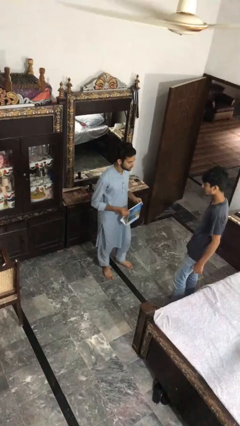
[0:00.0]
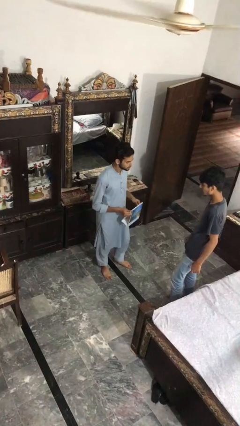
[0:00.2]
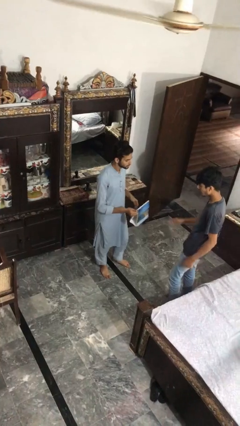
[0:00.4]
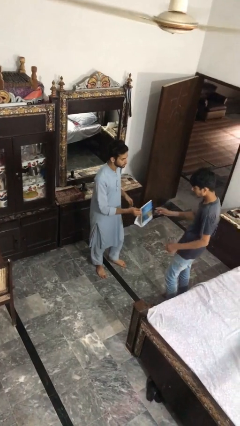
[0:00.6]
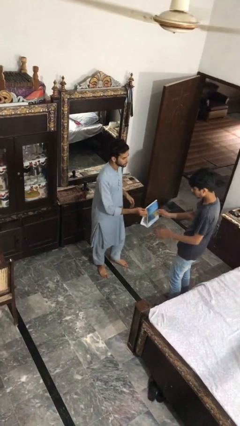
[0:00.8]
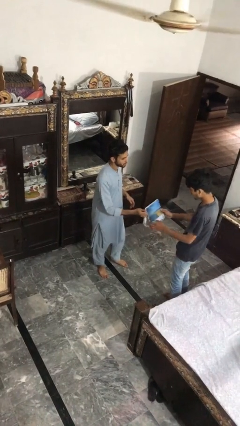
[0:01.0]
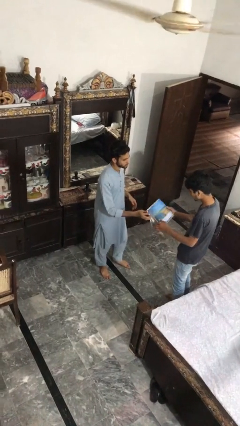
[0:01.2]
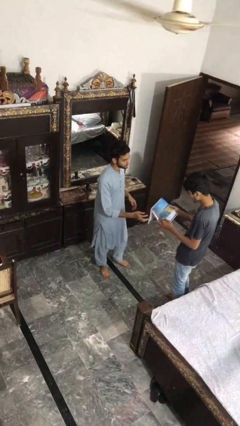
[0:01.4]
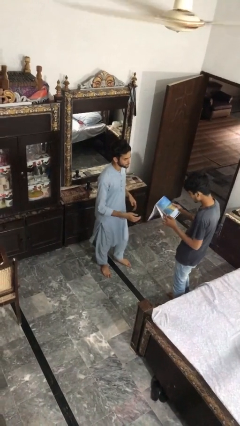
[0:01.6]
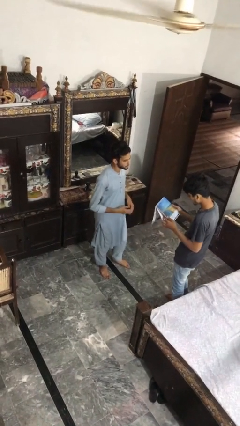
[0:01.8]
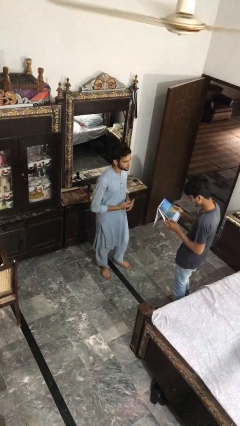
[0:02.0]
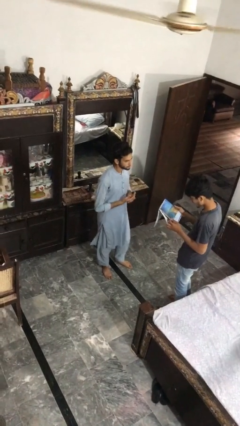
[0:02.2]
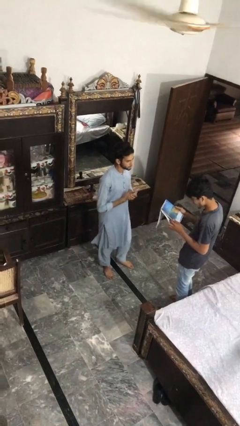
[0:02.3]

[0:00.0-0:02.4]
person transfers object to person

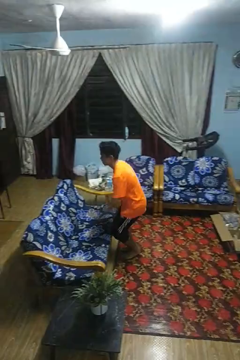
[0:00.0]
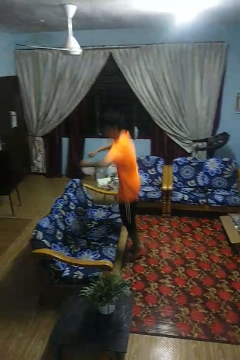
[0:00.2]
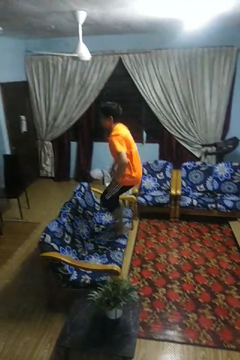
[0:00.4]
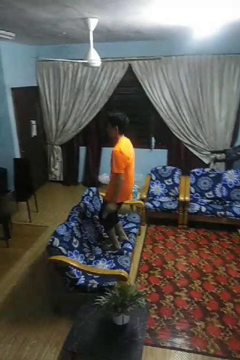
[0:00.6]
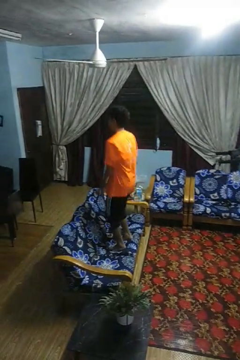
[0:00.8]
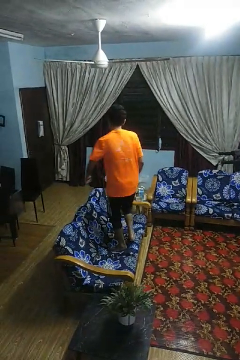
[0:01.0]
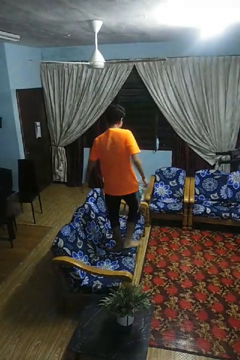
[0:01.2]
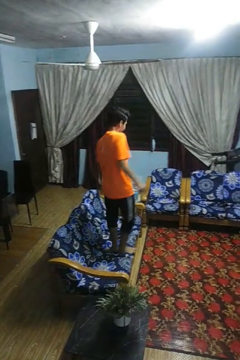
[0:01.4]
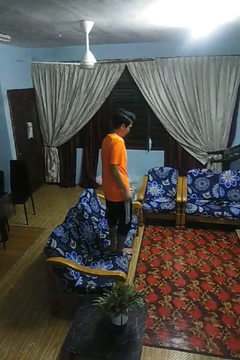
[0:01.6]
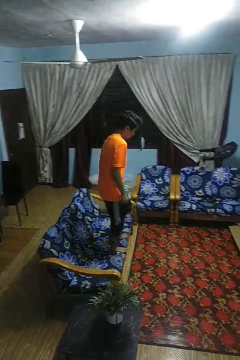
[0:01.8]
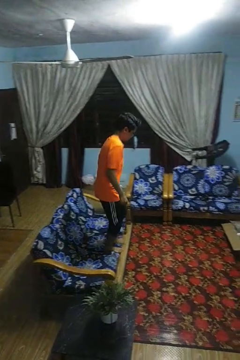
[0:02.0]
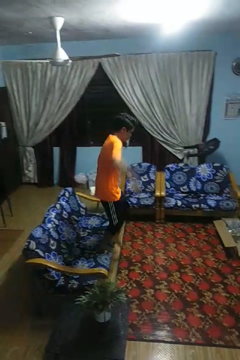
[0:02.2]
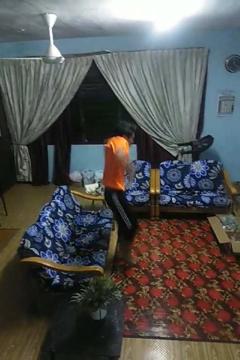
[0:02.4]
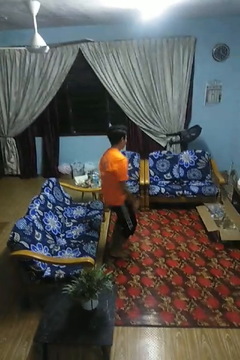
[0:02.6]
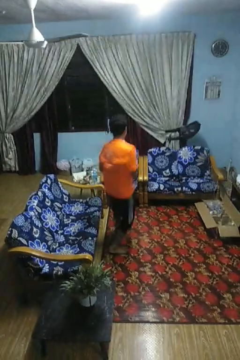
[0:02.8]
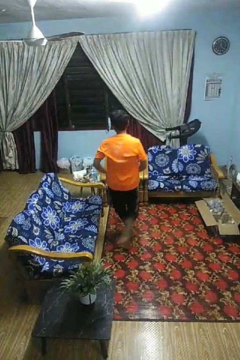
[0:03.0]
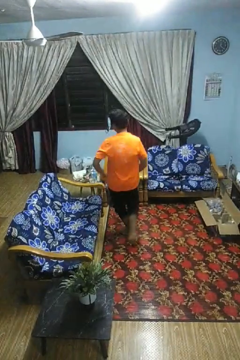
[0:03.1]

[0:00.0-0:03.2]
person jumps on couch

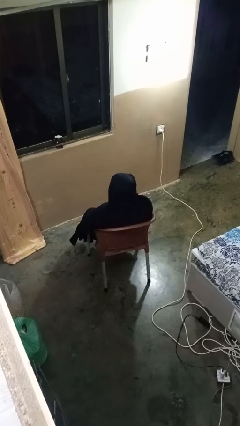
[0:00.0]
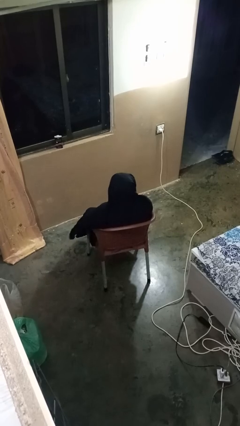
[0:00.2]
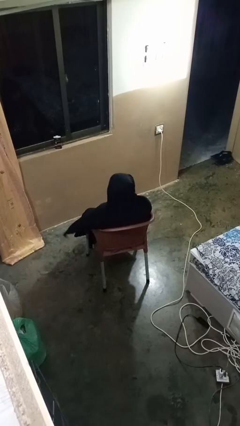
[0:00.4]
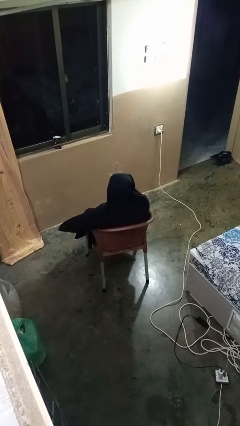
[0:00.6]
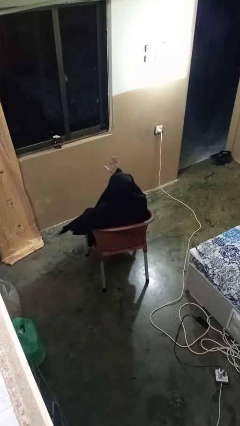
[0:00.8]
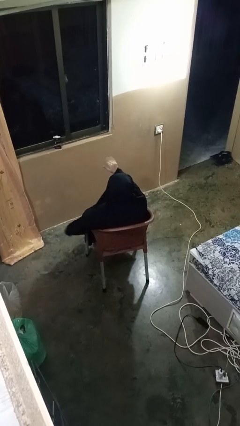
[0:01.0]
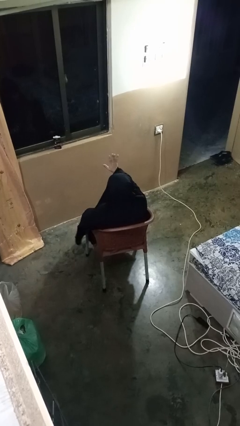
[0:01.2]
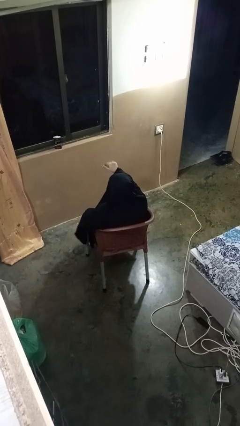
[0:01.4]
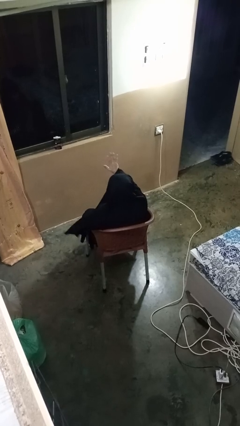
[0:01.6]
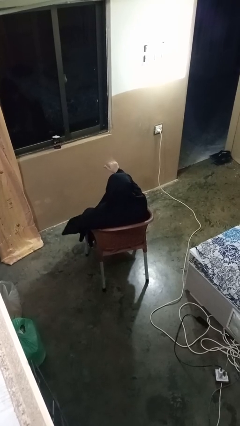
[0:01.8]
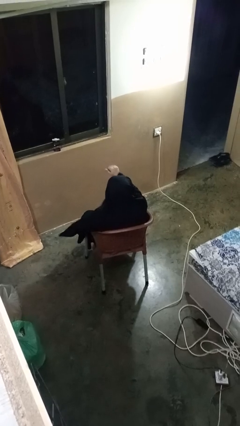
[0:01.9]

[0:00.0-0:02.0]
person gestures come here

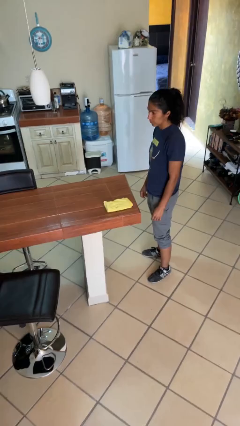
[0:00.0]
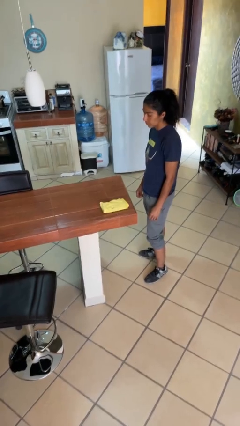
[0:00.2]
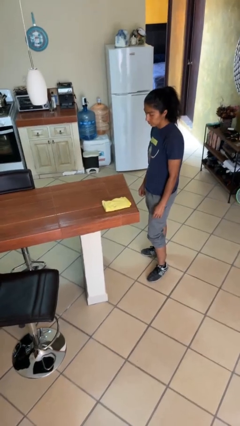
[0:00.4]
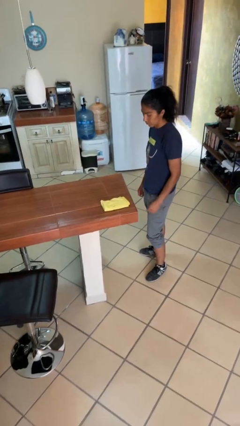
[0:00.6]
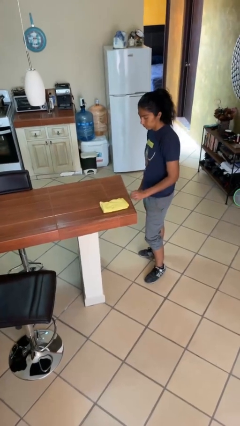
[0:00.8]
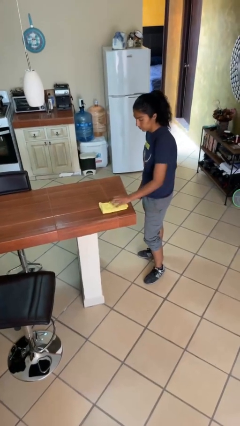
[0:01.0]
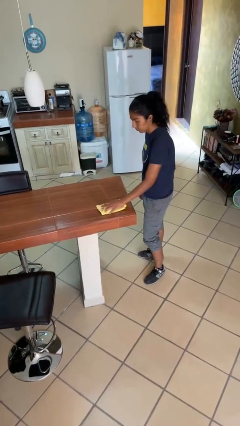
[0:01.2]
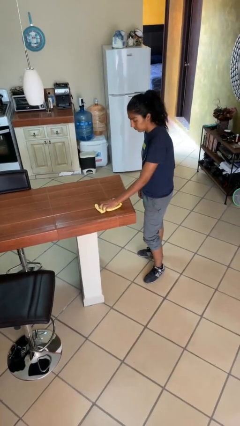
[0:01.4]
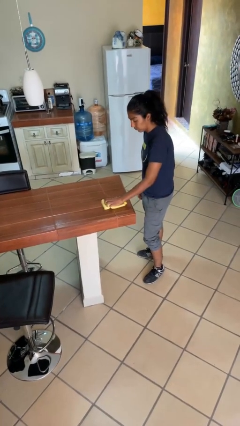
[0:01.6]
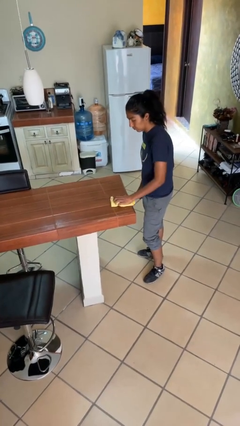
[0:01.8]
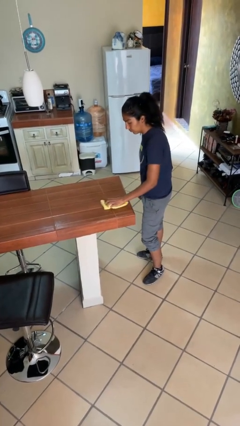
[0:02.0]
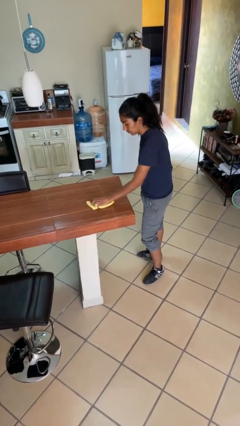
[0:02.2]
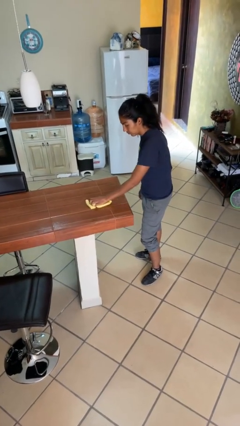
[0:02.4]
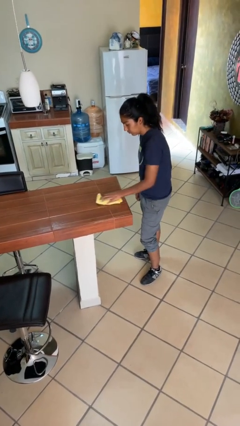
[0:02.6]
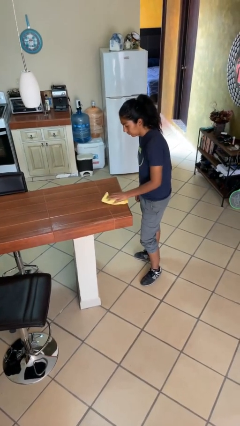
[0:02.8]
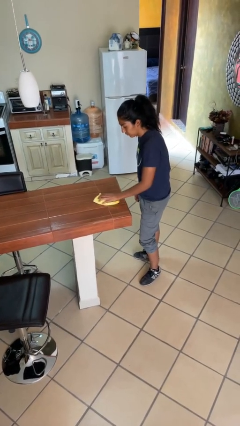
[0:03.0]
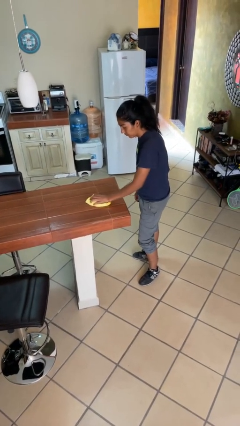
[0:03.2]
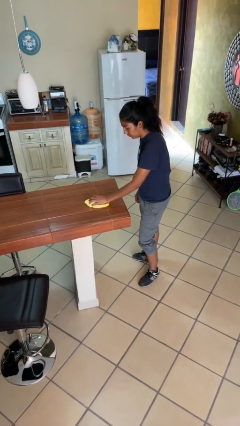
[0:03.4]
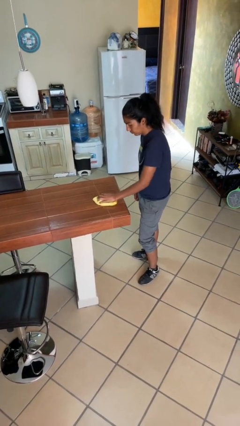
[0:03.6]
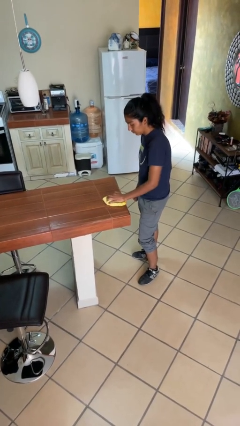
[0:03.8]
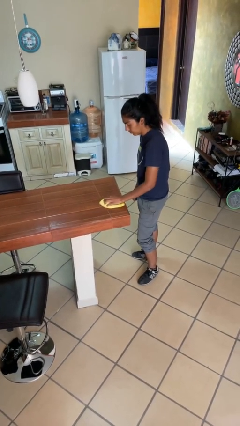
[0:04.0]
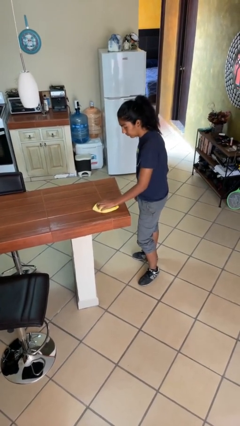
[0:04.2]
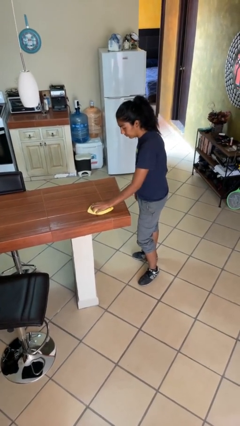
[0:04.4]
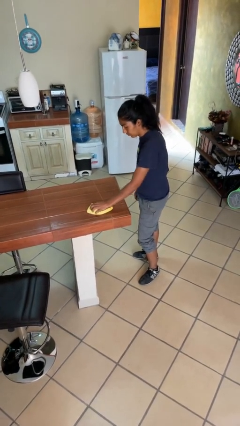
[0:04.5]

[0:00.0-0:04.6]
person cleans table with rag

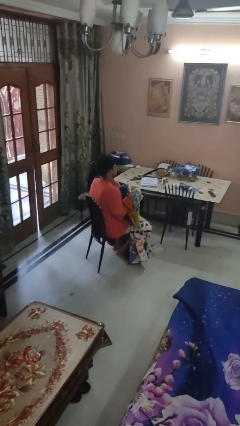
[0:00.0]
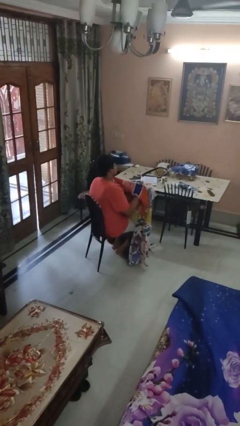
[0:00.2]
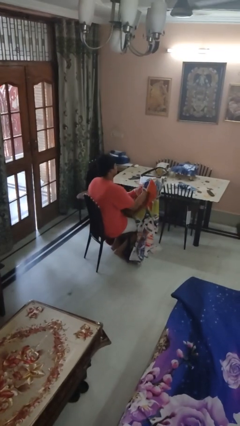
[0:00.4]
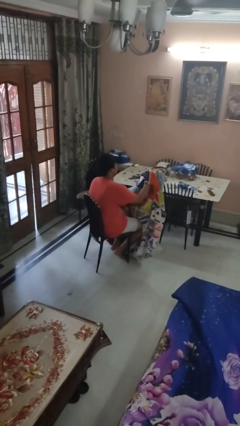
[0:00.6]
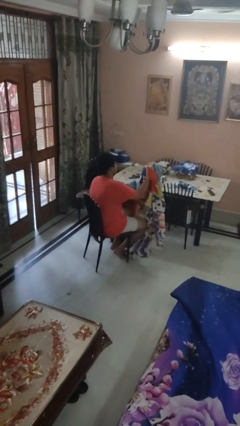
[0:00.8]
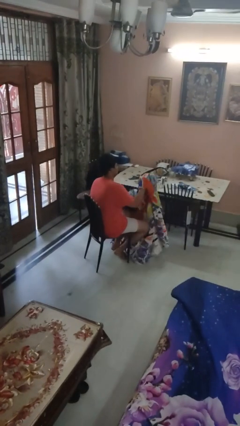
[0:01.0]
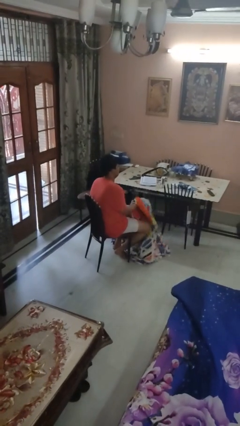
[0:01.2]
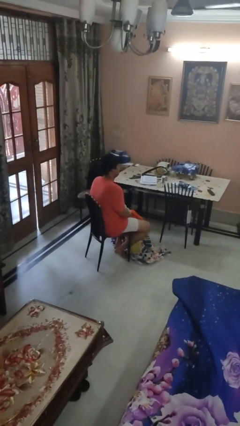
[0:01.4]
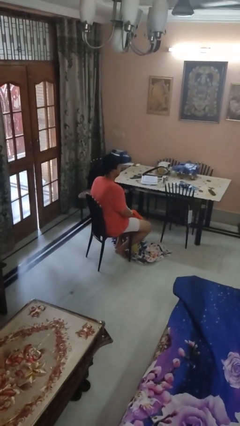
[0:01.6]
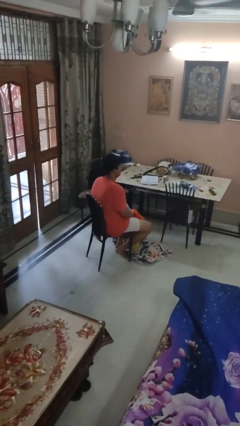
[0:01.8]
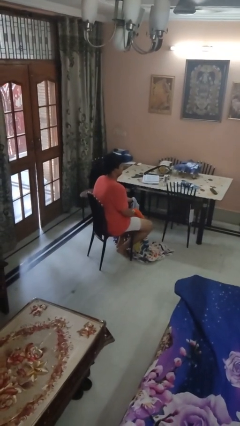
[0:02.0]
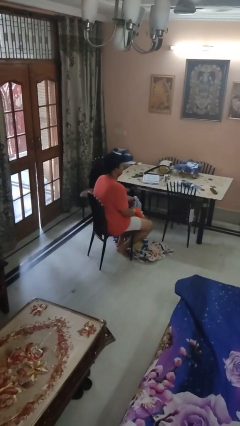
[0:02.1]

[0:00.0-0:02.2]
person uncovers with blanket

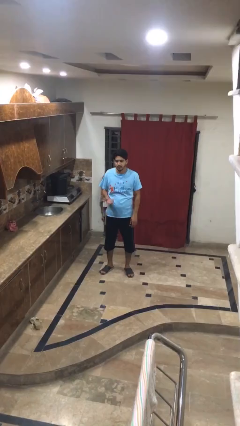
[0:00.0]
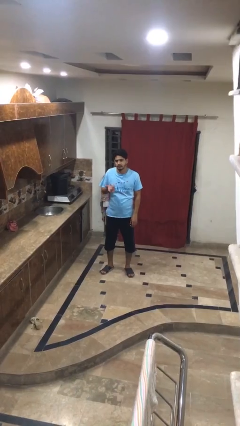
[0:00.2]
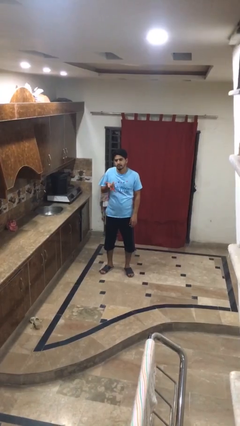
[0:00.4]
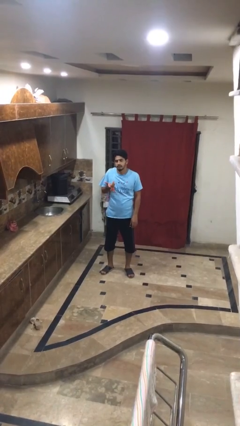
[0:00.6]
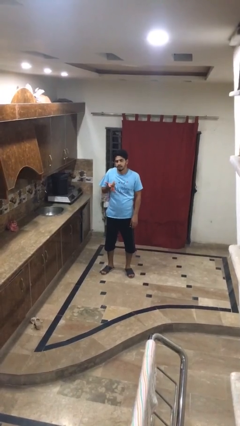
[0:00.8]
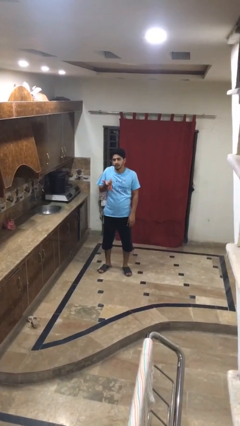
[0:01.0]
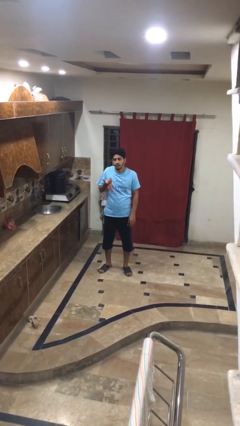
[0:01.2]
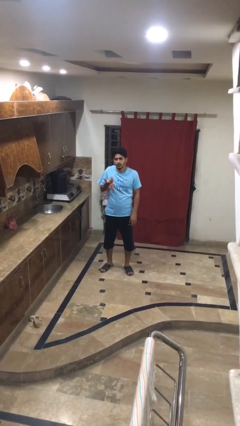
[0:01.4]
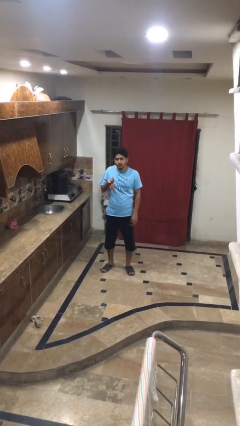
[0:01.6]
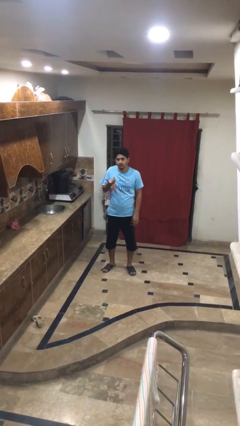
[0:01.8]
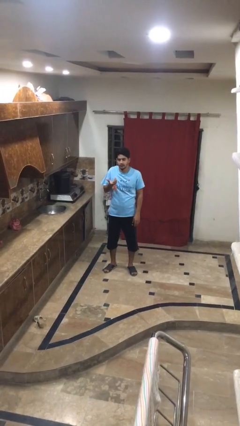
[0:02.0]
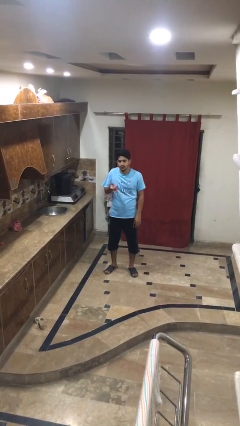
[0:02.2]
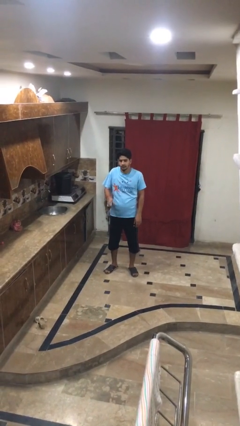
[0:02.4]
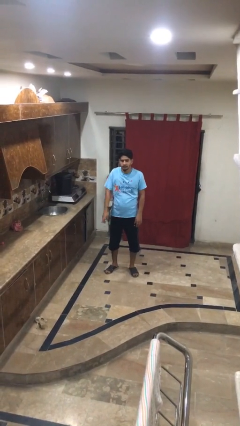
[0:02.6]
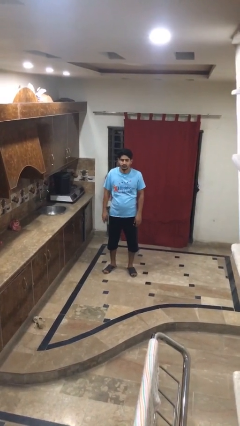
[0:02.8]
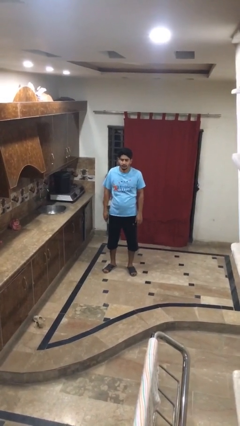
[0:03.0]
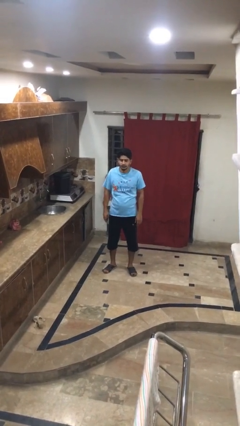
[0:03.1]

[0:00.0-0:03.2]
person shrugs

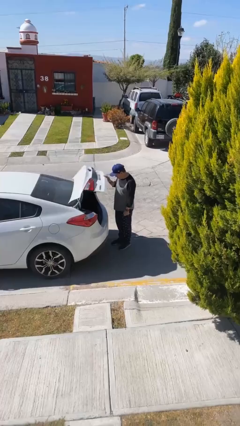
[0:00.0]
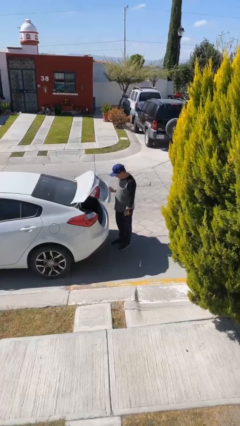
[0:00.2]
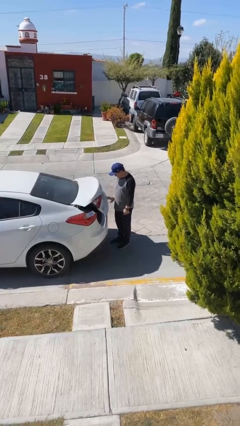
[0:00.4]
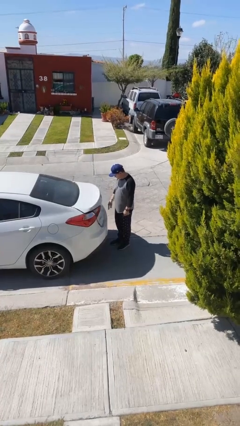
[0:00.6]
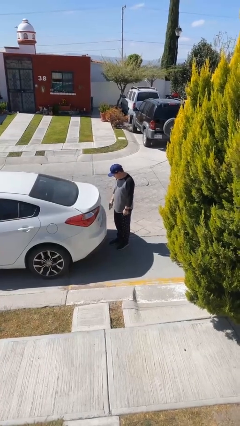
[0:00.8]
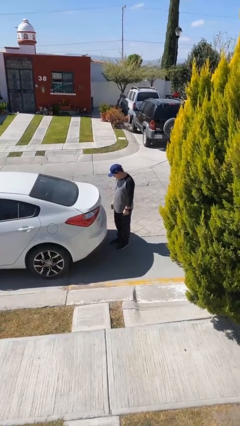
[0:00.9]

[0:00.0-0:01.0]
person closes car trunk
